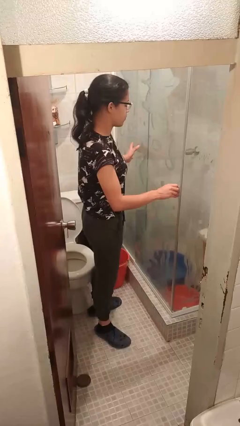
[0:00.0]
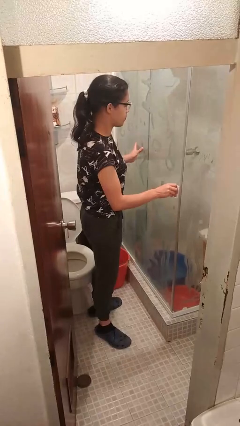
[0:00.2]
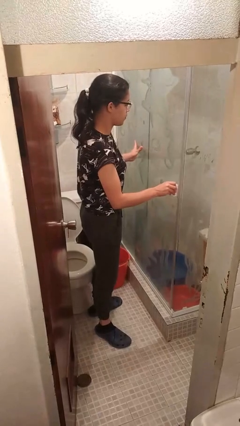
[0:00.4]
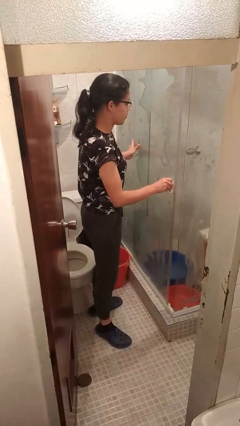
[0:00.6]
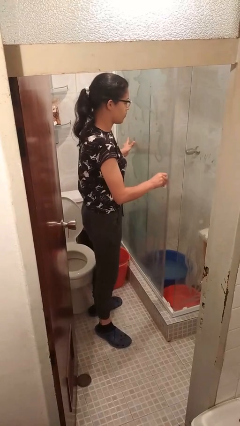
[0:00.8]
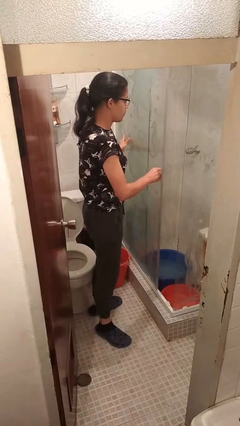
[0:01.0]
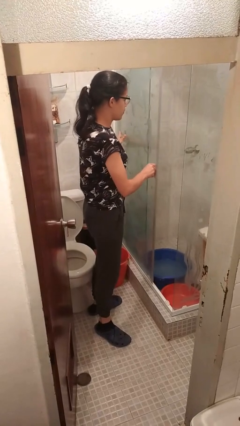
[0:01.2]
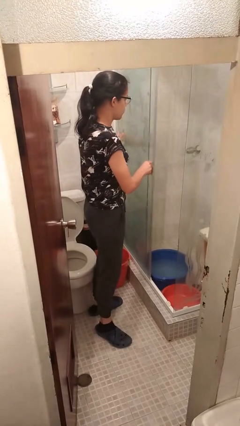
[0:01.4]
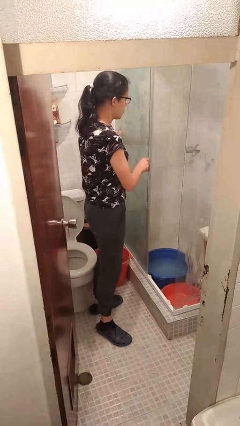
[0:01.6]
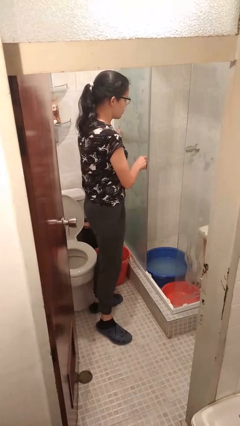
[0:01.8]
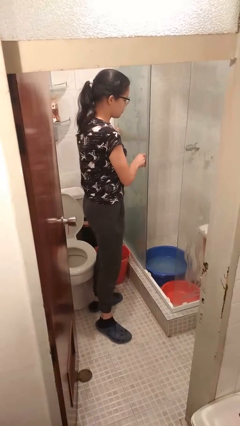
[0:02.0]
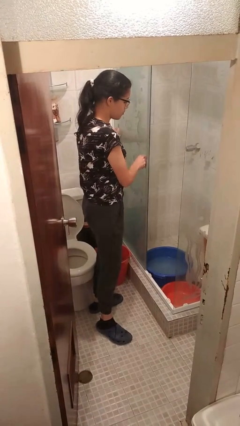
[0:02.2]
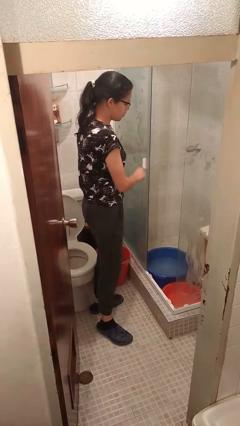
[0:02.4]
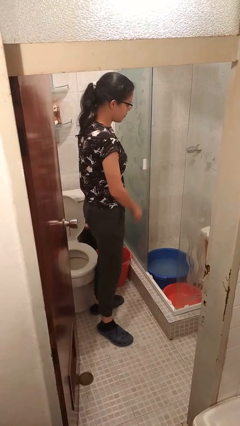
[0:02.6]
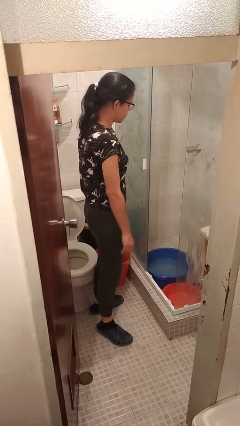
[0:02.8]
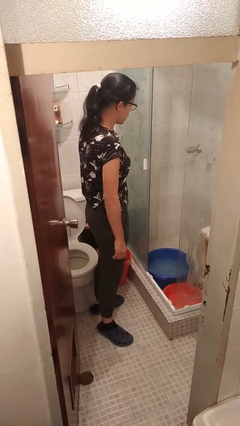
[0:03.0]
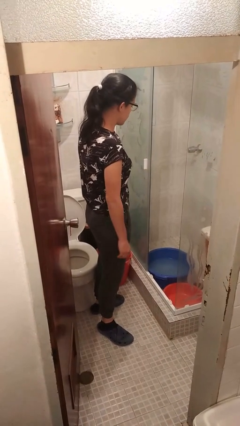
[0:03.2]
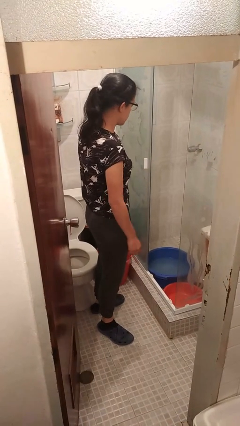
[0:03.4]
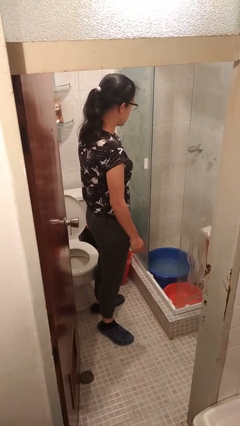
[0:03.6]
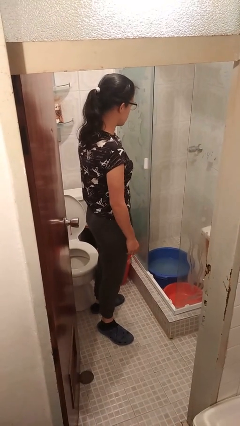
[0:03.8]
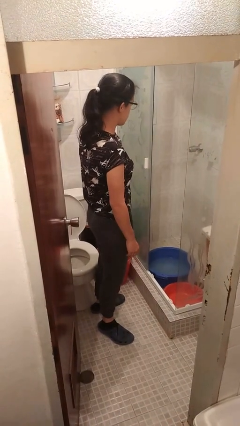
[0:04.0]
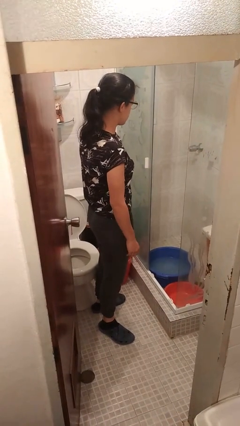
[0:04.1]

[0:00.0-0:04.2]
person opens sliding door

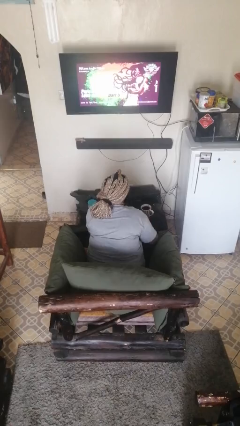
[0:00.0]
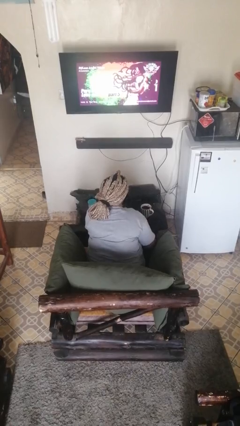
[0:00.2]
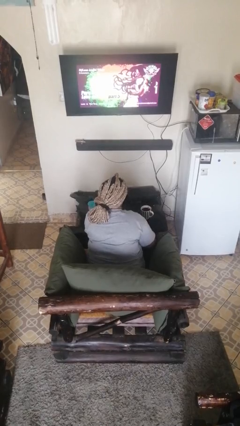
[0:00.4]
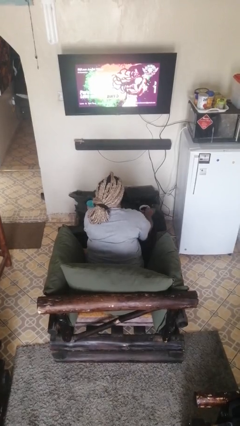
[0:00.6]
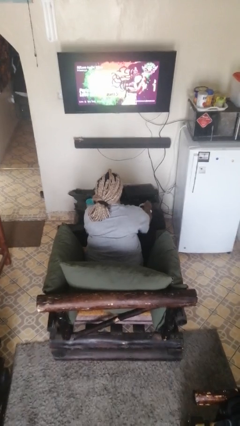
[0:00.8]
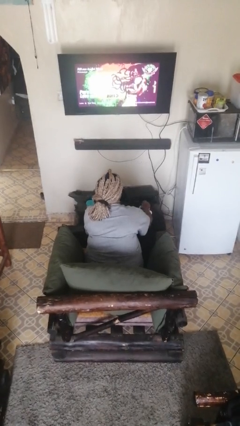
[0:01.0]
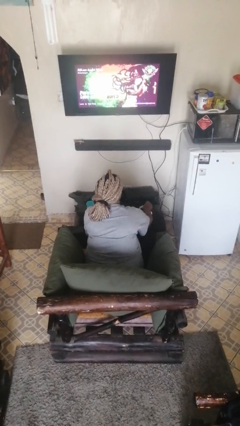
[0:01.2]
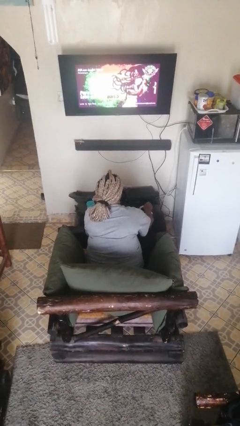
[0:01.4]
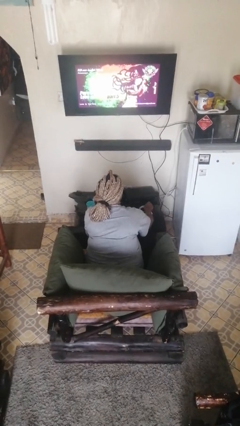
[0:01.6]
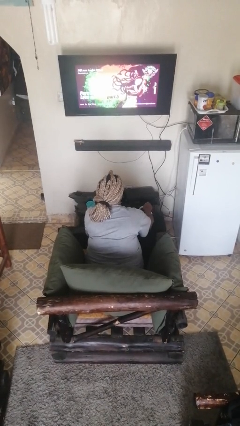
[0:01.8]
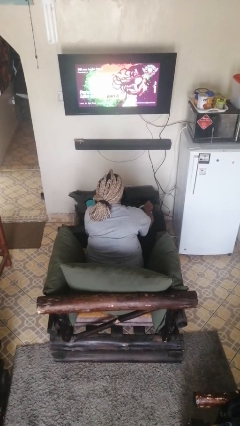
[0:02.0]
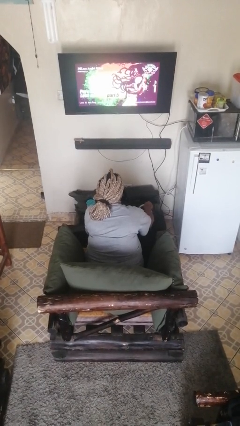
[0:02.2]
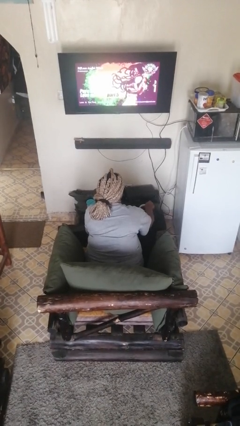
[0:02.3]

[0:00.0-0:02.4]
person stirs mug

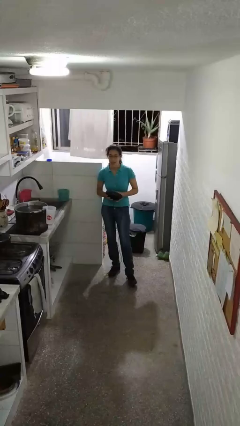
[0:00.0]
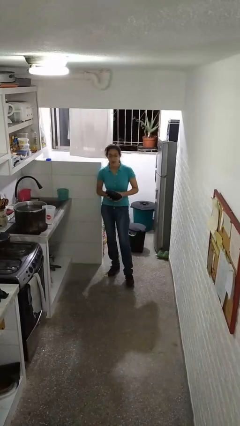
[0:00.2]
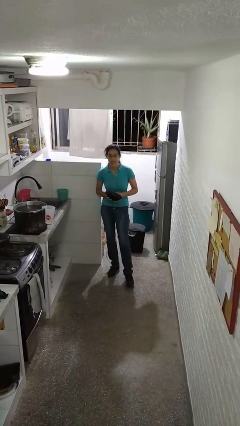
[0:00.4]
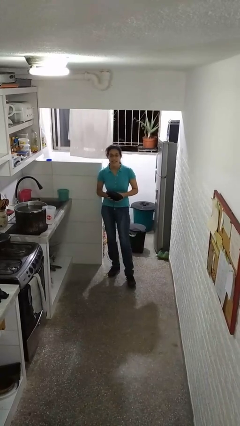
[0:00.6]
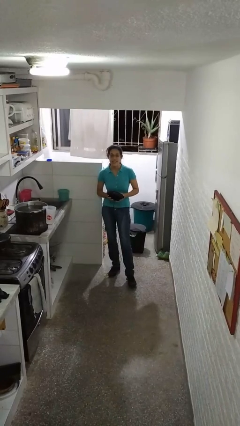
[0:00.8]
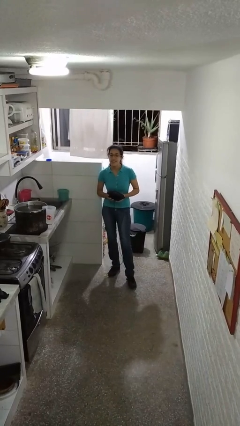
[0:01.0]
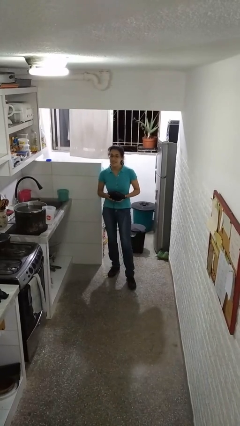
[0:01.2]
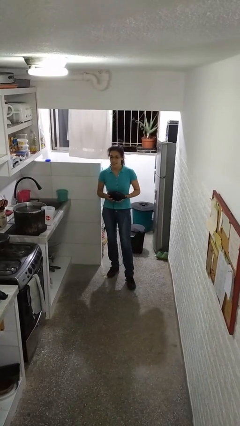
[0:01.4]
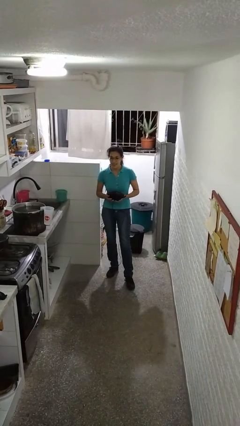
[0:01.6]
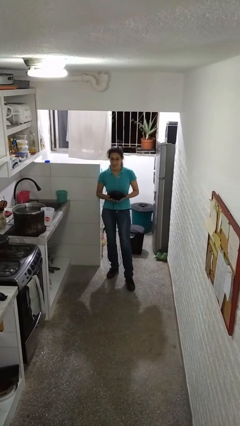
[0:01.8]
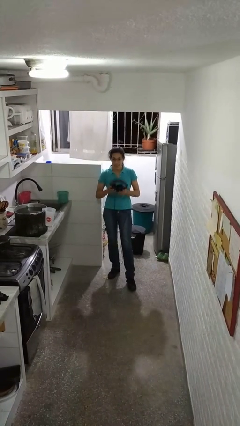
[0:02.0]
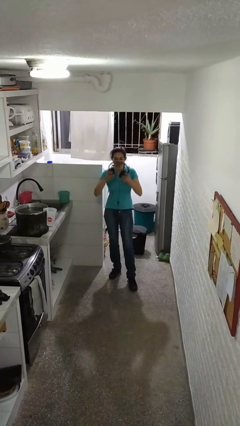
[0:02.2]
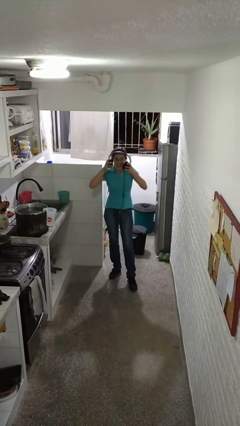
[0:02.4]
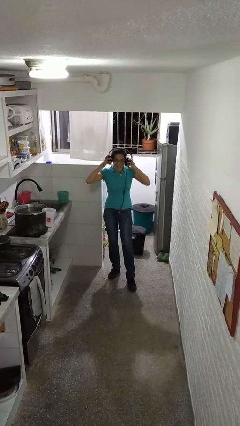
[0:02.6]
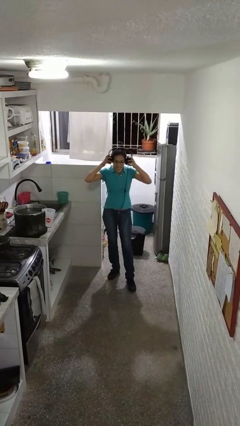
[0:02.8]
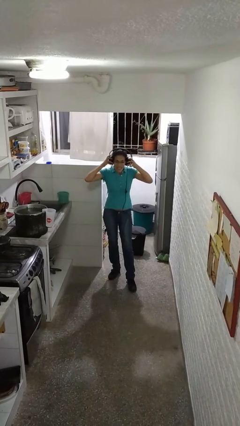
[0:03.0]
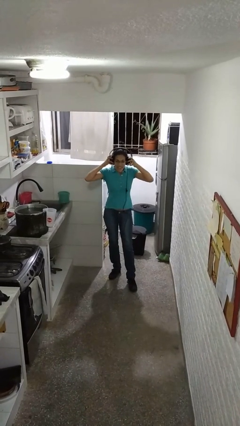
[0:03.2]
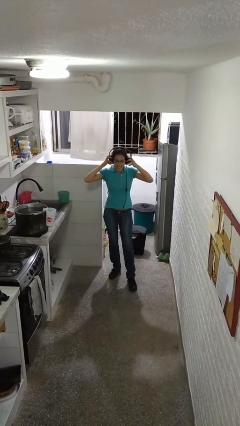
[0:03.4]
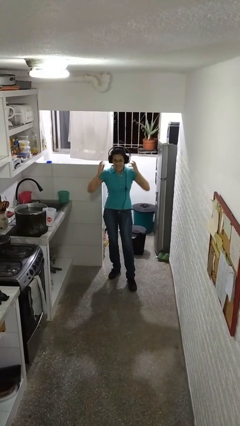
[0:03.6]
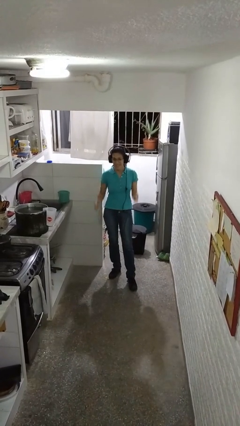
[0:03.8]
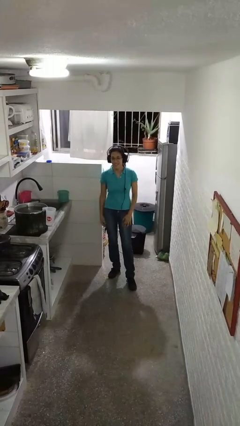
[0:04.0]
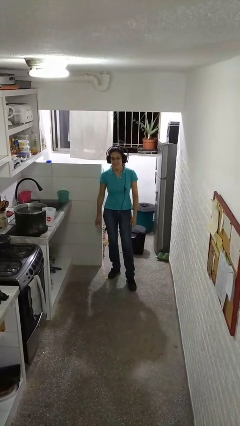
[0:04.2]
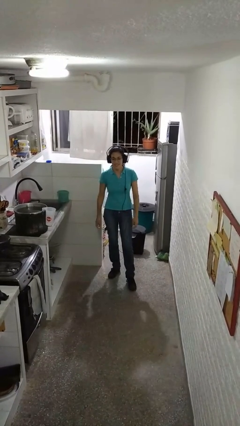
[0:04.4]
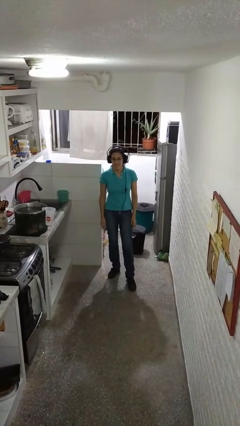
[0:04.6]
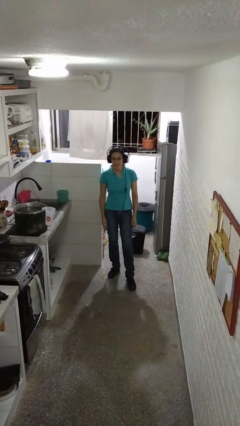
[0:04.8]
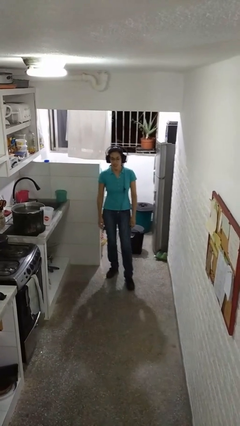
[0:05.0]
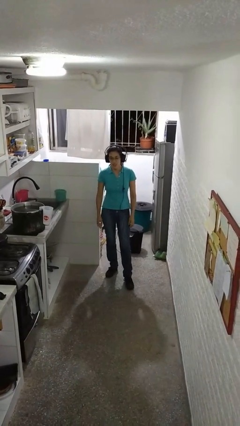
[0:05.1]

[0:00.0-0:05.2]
person puts on headphones

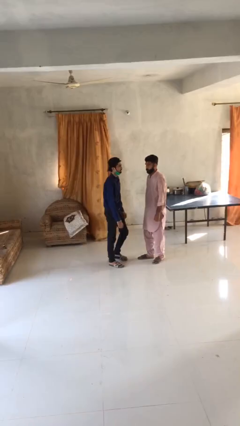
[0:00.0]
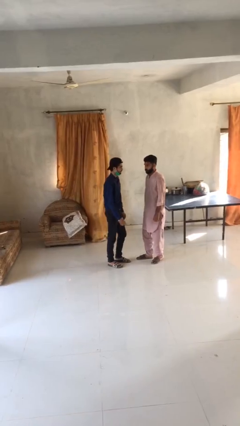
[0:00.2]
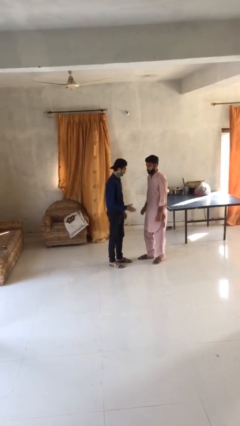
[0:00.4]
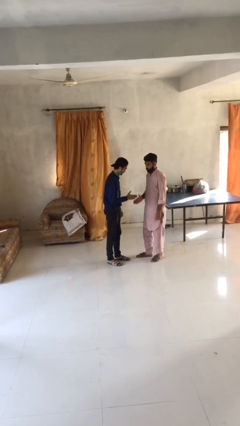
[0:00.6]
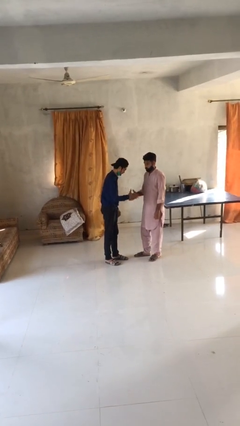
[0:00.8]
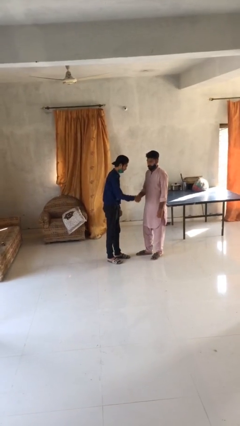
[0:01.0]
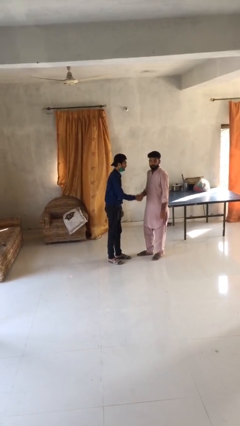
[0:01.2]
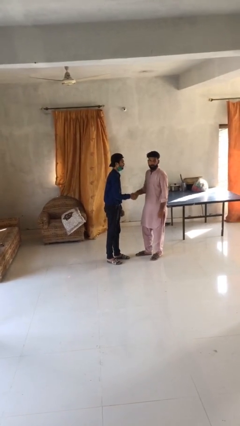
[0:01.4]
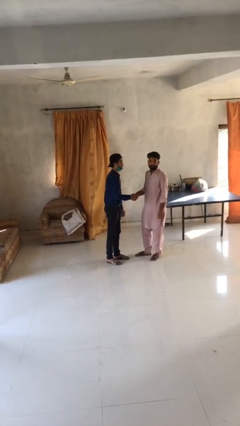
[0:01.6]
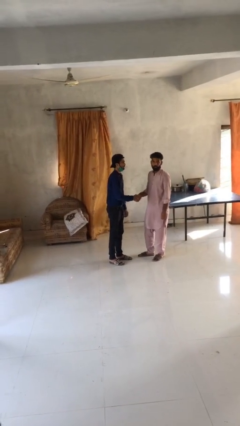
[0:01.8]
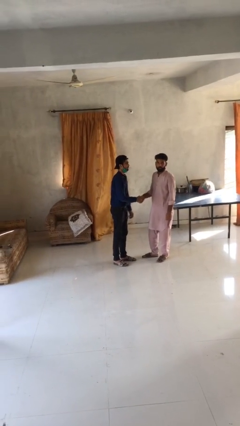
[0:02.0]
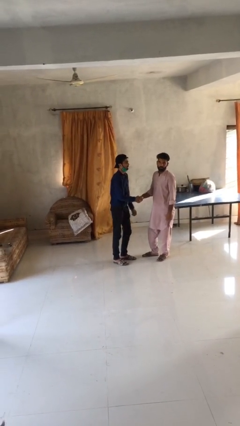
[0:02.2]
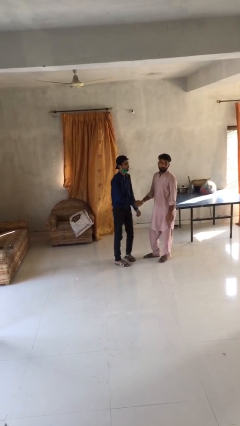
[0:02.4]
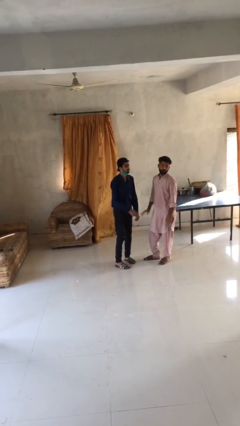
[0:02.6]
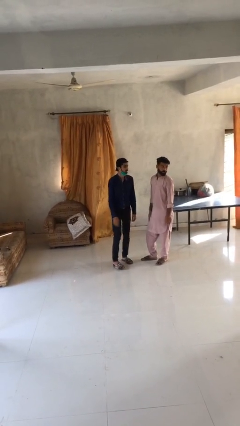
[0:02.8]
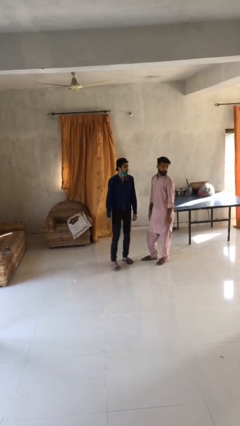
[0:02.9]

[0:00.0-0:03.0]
person shakes hand

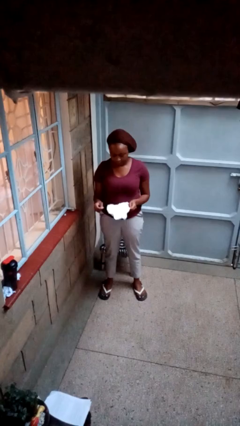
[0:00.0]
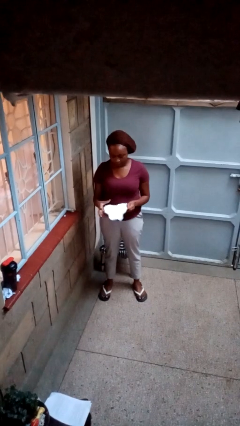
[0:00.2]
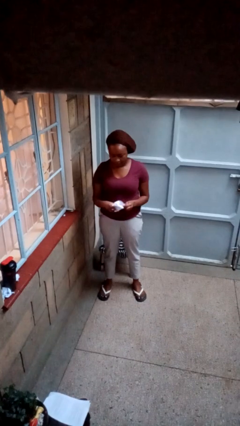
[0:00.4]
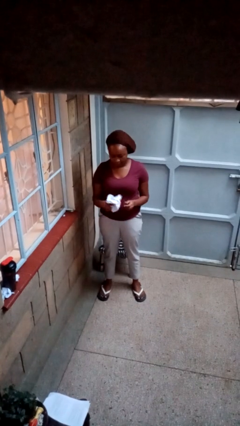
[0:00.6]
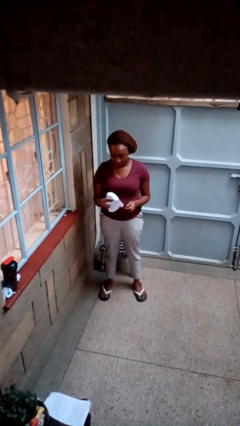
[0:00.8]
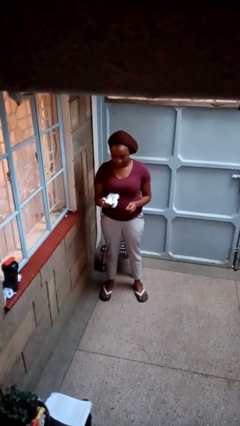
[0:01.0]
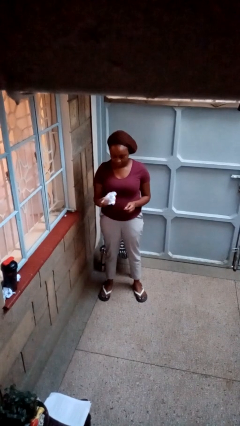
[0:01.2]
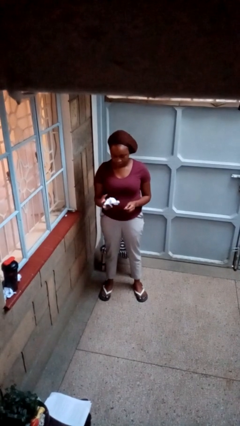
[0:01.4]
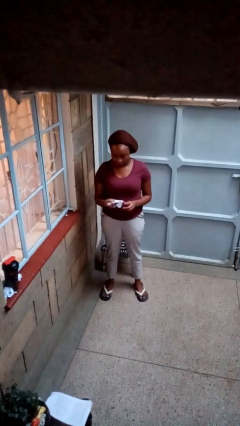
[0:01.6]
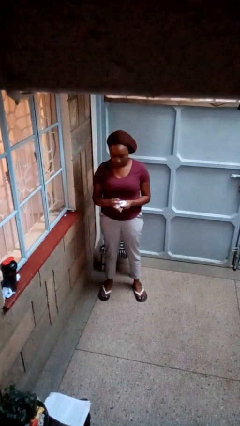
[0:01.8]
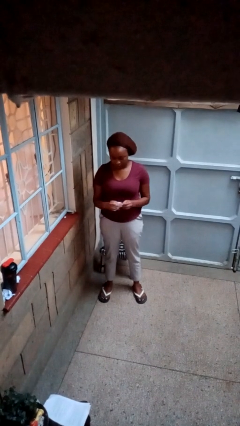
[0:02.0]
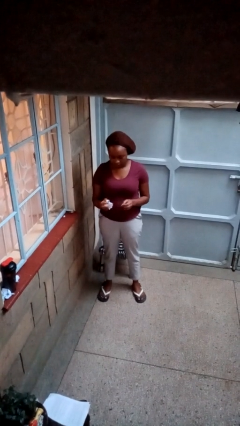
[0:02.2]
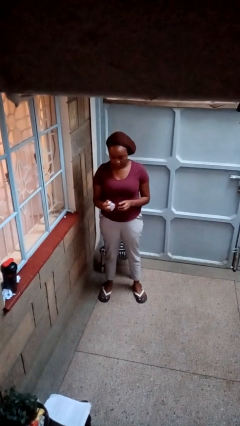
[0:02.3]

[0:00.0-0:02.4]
person crumples paper

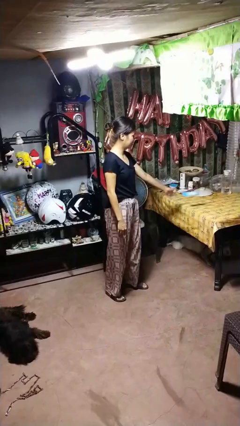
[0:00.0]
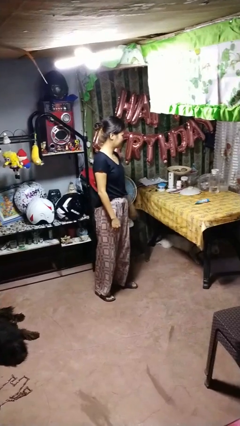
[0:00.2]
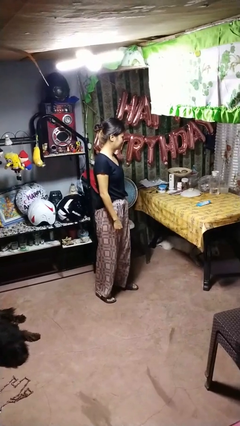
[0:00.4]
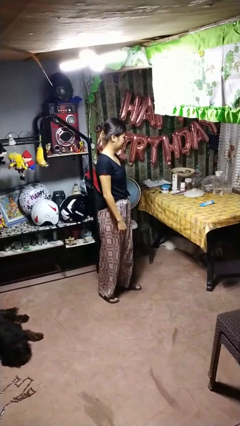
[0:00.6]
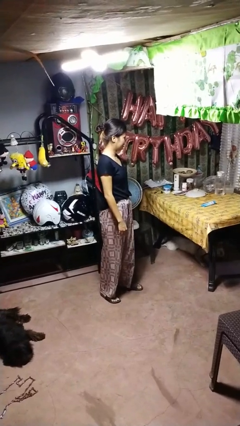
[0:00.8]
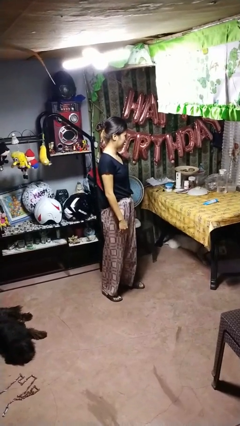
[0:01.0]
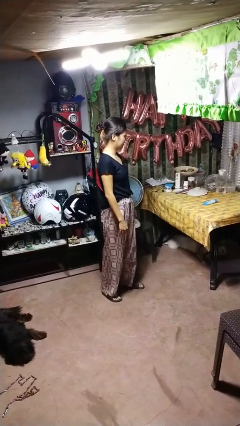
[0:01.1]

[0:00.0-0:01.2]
person throws object on table
